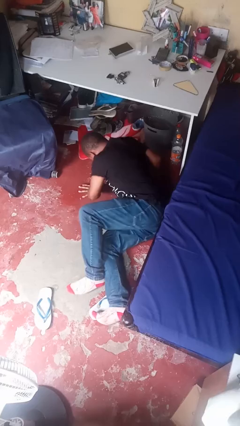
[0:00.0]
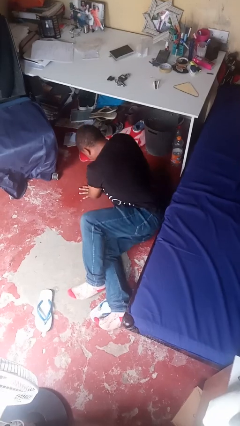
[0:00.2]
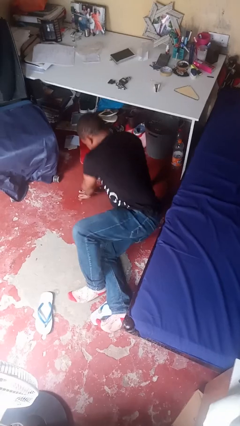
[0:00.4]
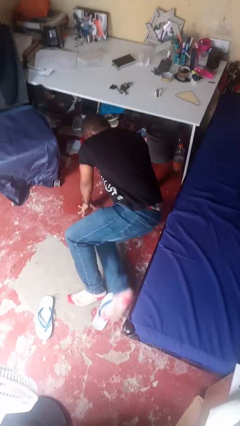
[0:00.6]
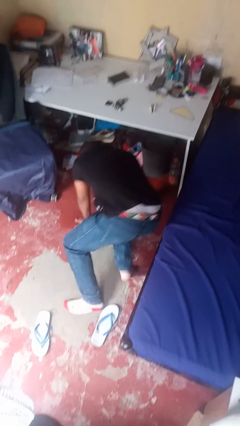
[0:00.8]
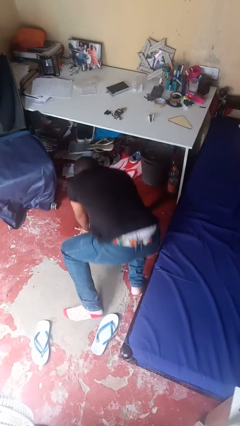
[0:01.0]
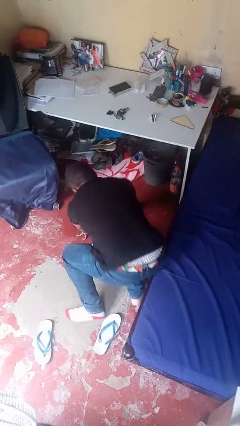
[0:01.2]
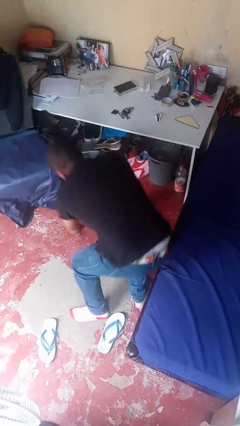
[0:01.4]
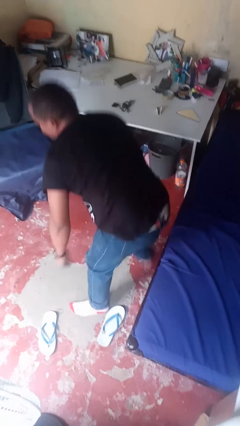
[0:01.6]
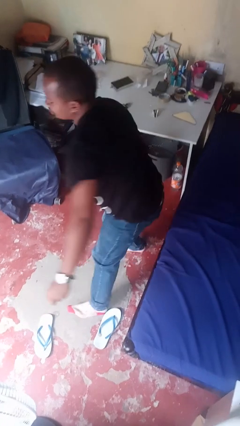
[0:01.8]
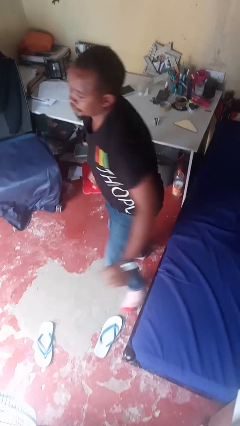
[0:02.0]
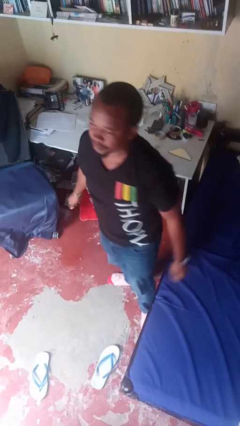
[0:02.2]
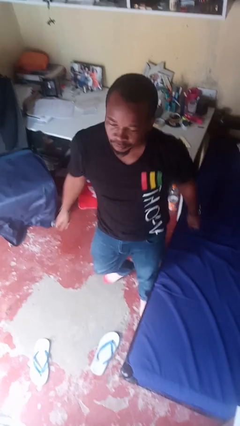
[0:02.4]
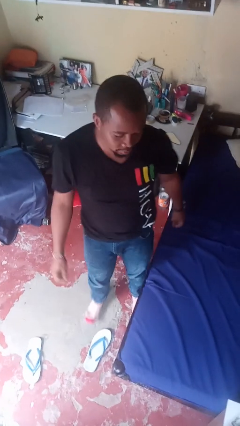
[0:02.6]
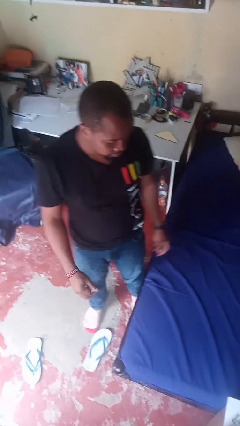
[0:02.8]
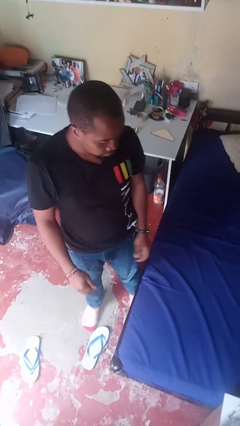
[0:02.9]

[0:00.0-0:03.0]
person stands up from floor

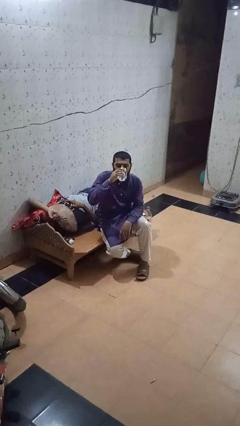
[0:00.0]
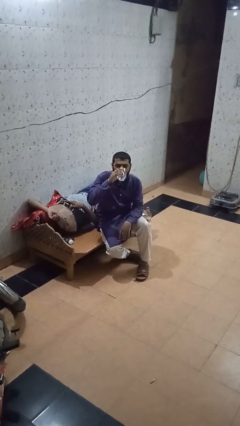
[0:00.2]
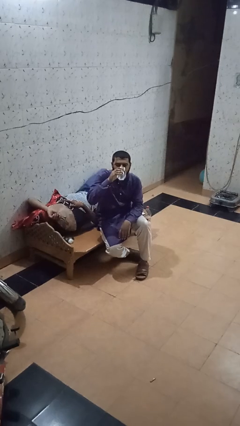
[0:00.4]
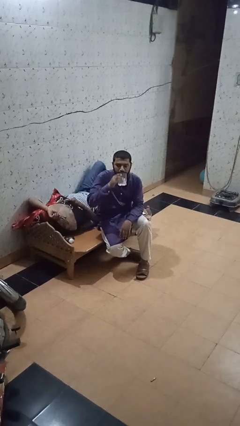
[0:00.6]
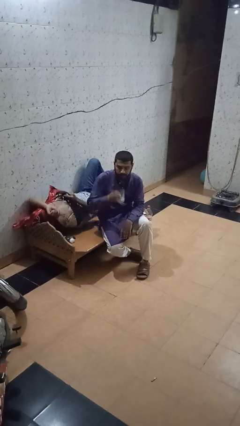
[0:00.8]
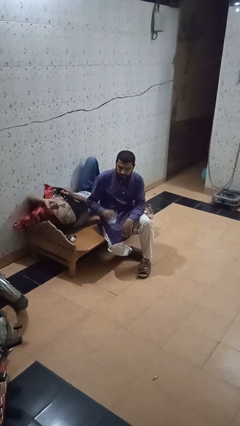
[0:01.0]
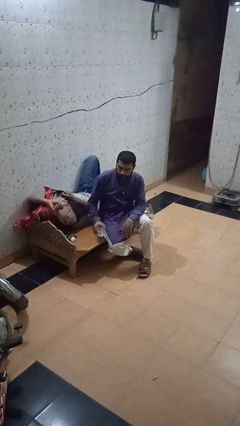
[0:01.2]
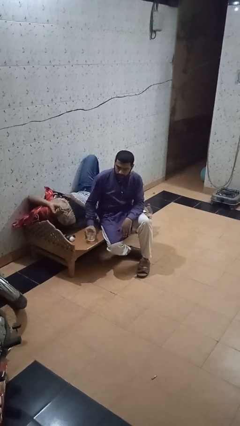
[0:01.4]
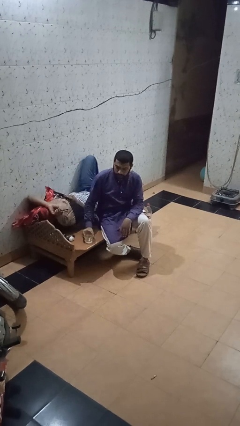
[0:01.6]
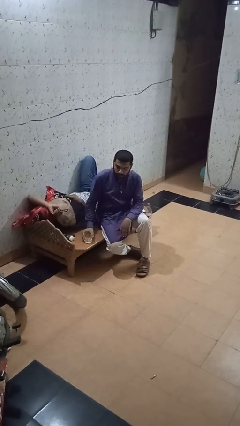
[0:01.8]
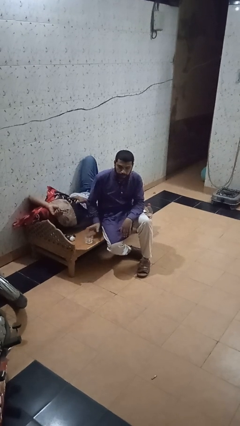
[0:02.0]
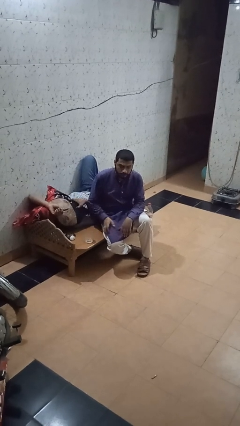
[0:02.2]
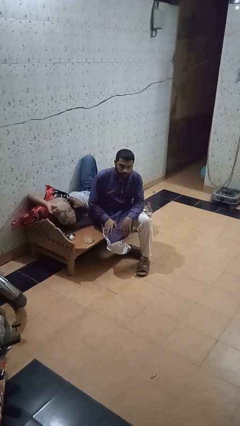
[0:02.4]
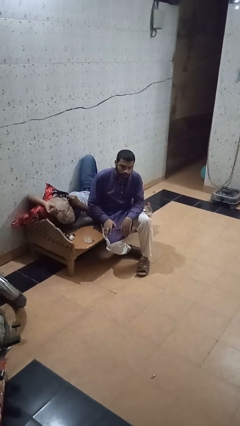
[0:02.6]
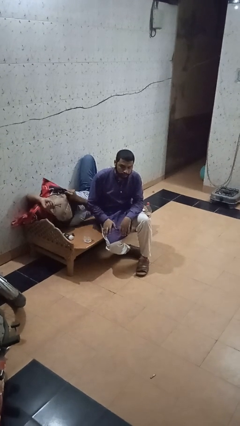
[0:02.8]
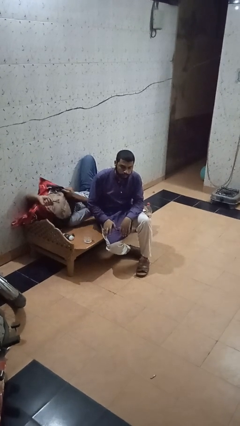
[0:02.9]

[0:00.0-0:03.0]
person puts down object on table

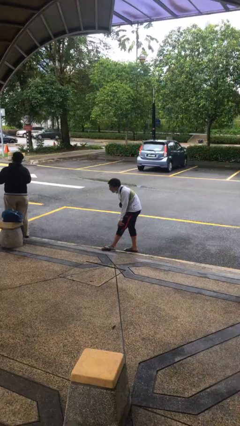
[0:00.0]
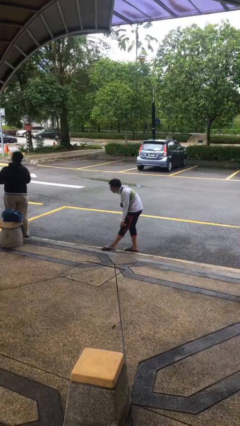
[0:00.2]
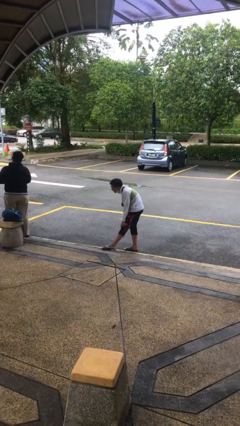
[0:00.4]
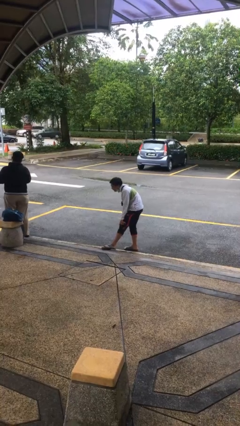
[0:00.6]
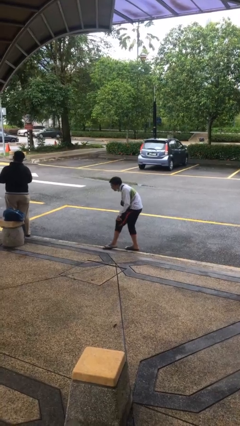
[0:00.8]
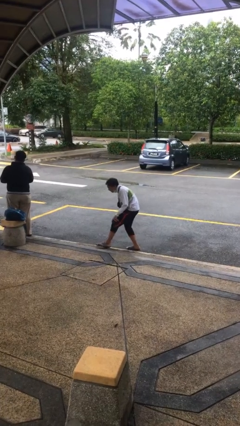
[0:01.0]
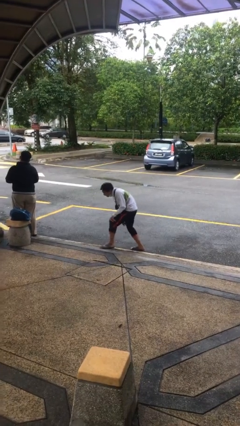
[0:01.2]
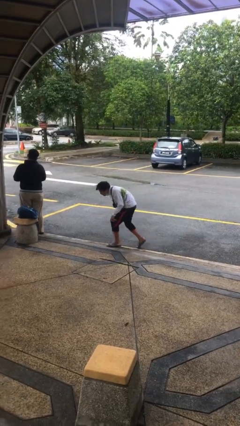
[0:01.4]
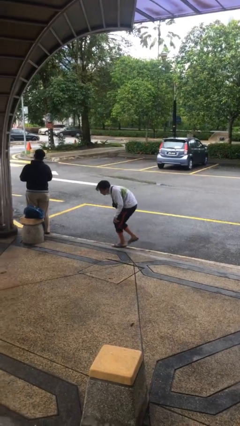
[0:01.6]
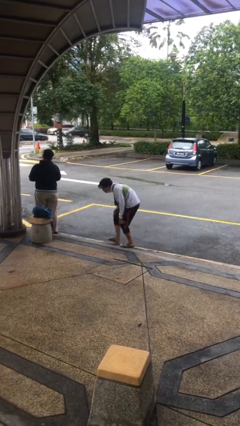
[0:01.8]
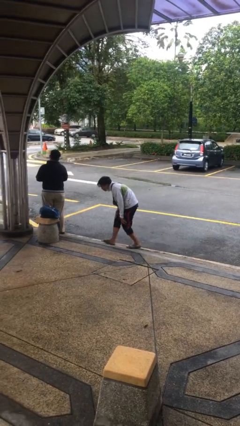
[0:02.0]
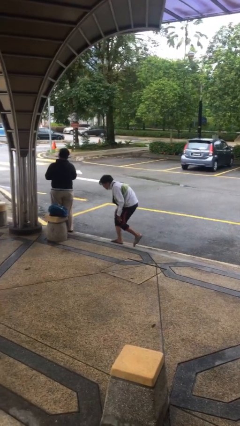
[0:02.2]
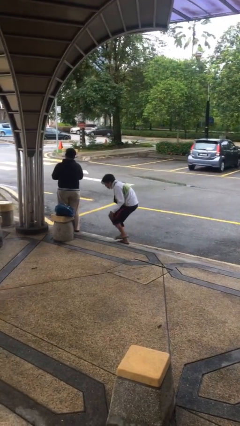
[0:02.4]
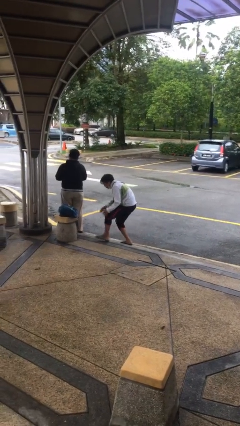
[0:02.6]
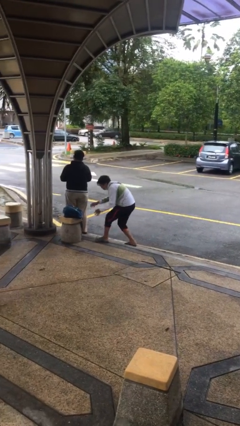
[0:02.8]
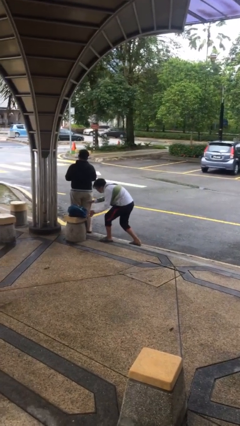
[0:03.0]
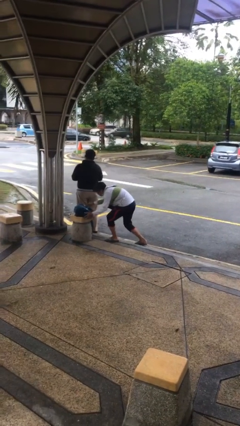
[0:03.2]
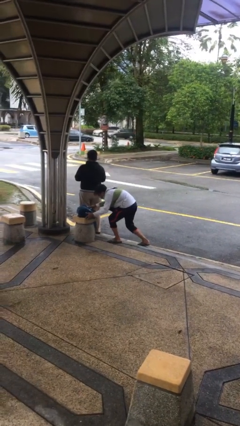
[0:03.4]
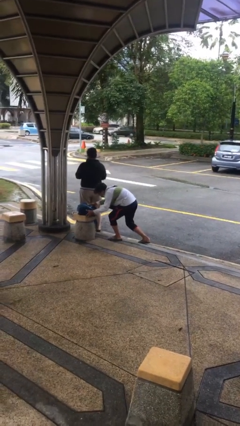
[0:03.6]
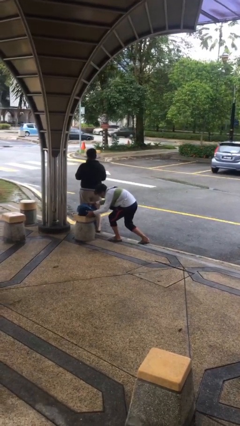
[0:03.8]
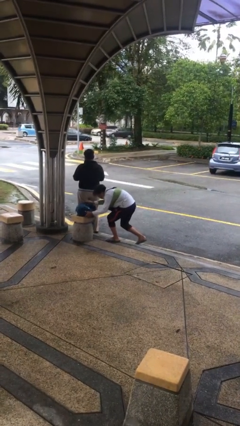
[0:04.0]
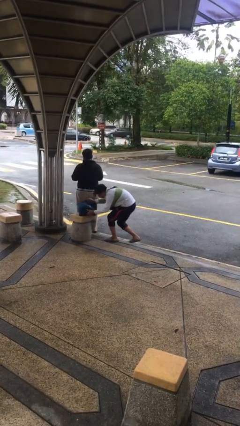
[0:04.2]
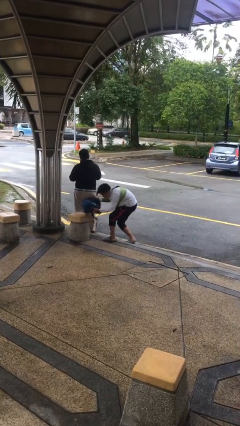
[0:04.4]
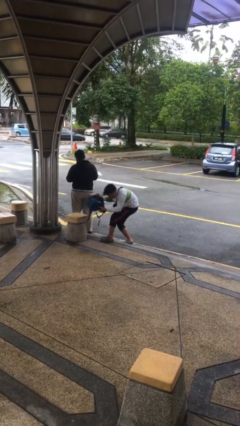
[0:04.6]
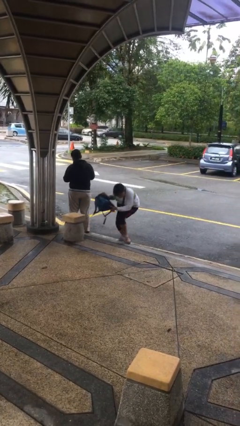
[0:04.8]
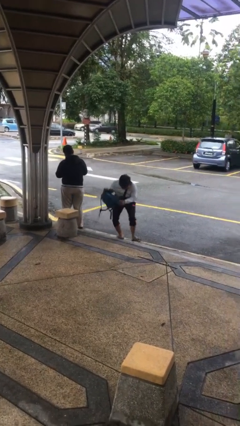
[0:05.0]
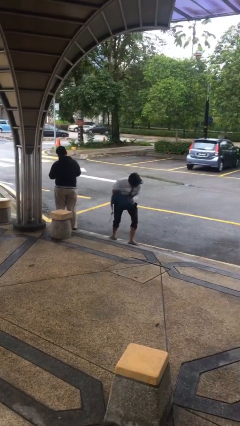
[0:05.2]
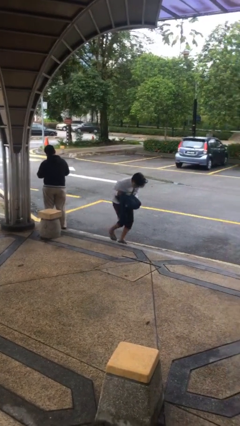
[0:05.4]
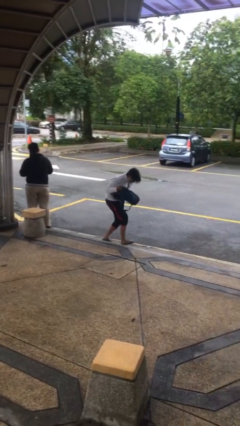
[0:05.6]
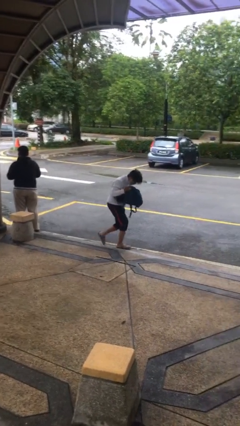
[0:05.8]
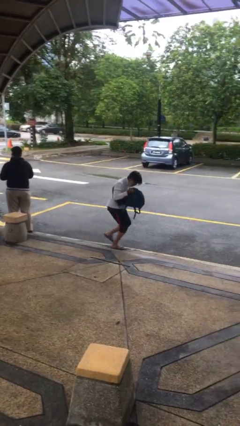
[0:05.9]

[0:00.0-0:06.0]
person steals object from person

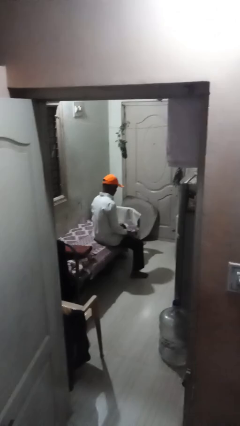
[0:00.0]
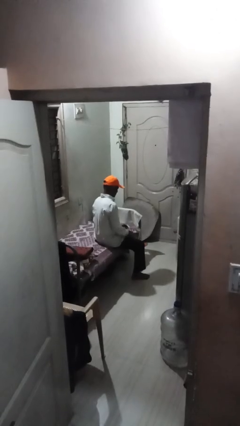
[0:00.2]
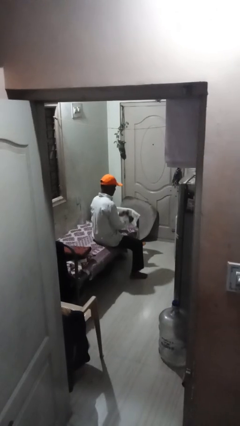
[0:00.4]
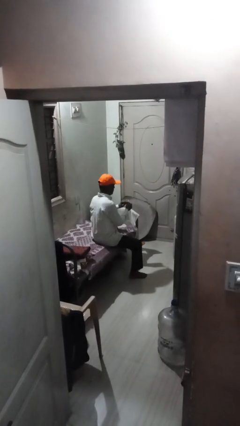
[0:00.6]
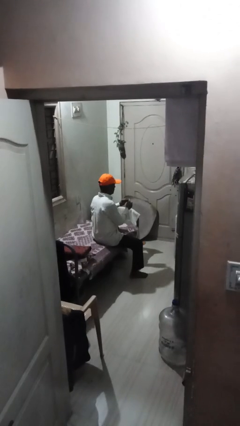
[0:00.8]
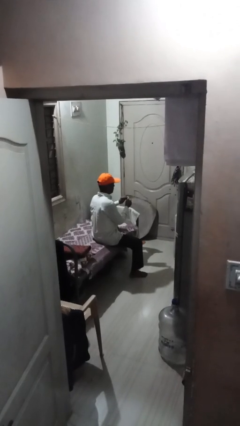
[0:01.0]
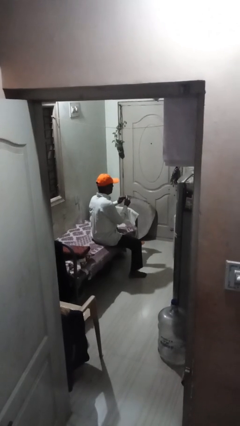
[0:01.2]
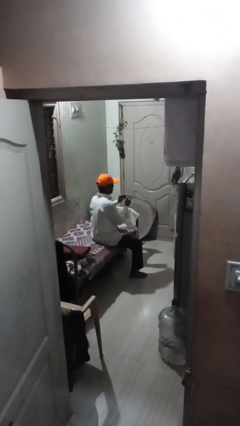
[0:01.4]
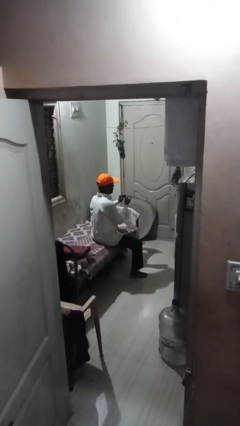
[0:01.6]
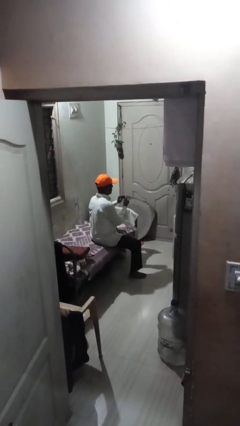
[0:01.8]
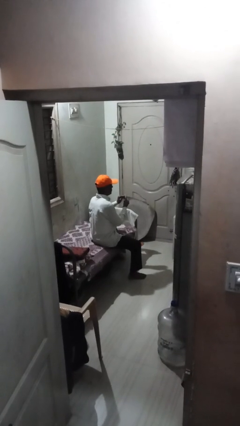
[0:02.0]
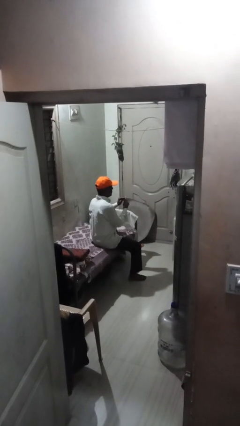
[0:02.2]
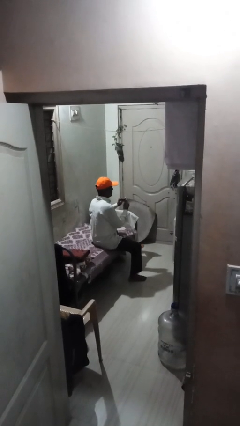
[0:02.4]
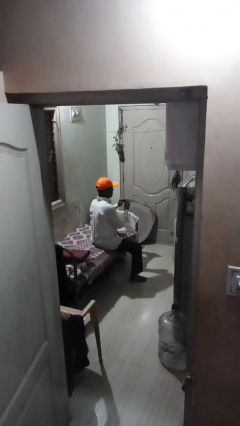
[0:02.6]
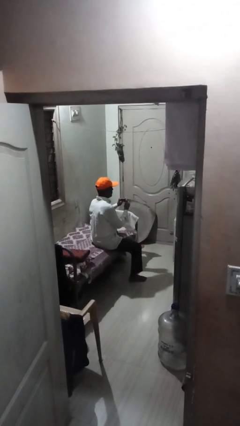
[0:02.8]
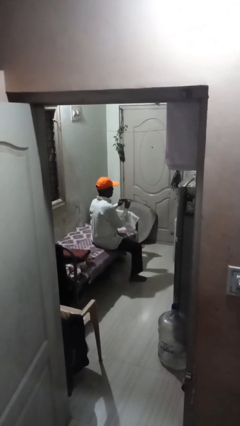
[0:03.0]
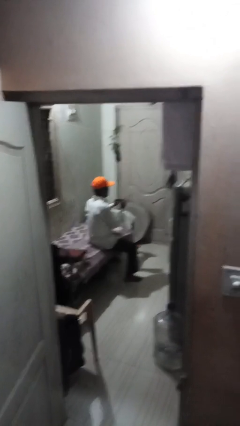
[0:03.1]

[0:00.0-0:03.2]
person files fingernails

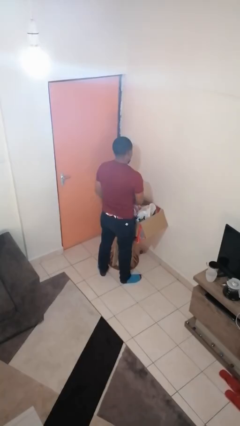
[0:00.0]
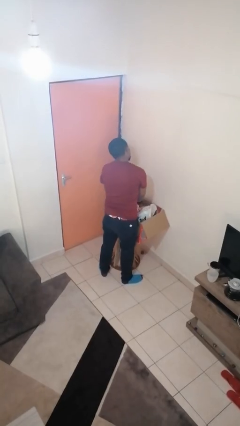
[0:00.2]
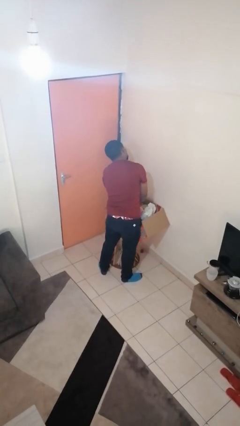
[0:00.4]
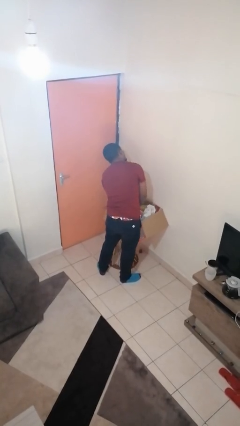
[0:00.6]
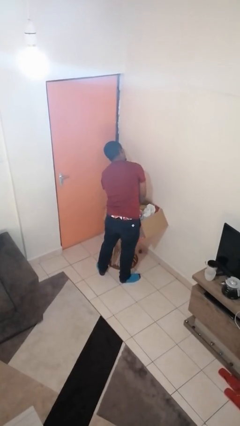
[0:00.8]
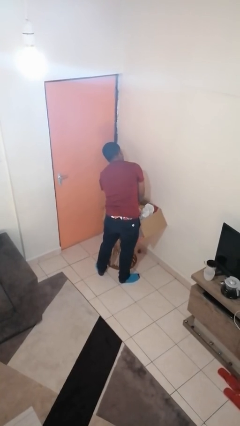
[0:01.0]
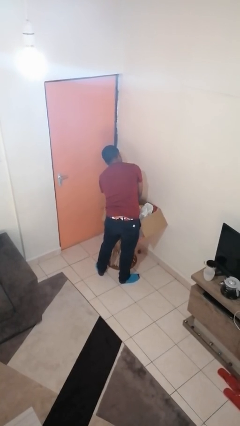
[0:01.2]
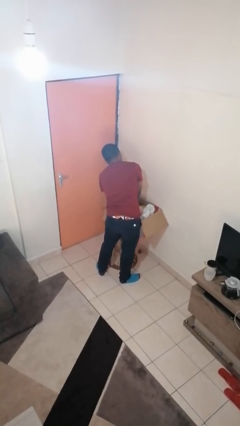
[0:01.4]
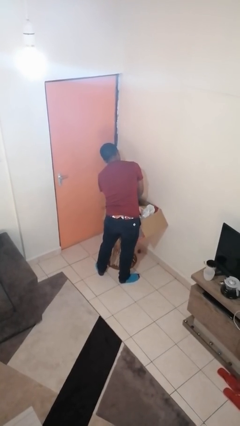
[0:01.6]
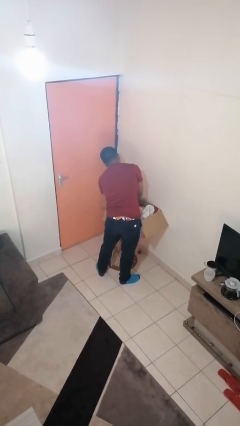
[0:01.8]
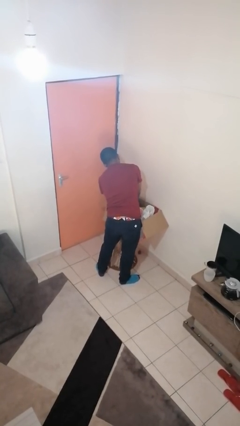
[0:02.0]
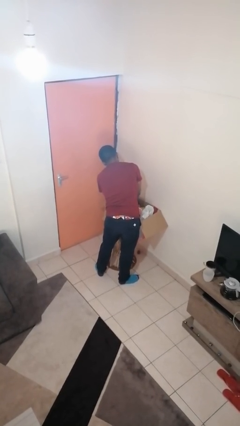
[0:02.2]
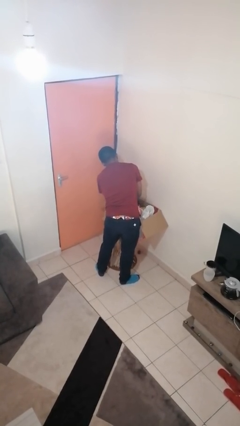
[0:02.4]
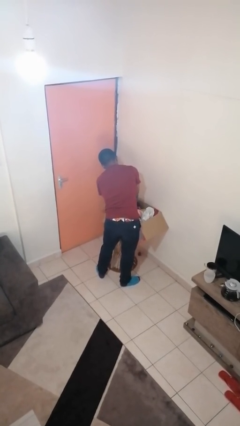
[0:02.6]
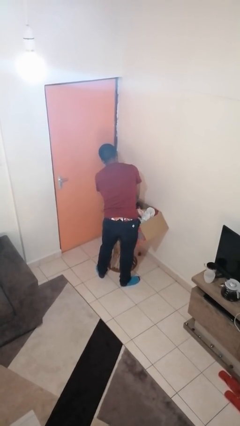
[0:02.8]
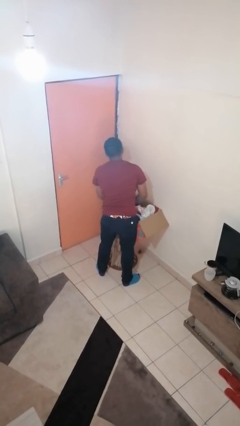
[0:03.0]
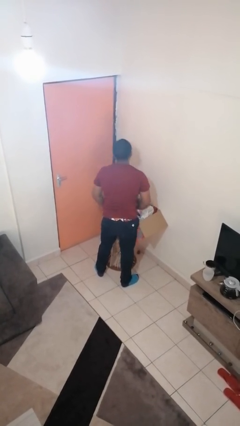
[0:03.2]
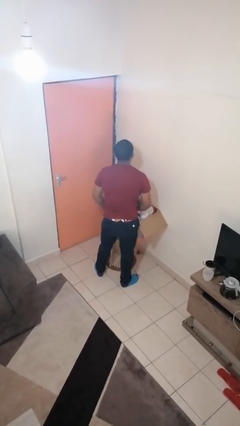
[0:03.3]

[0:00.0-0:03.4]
person searches in box
